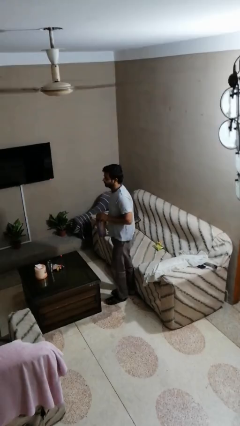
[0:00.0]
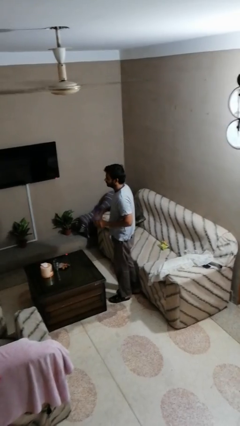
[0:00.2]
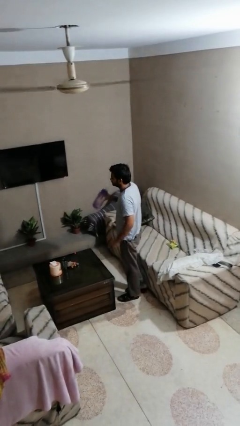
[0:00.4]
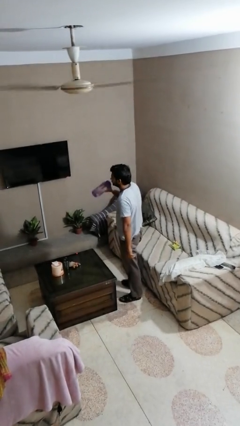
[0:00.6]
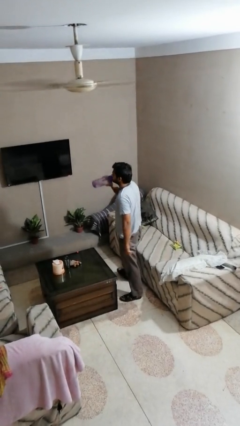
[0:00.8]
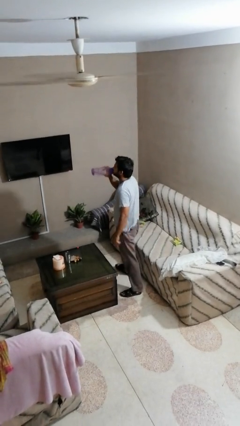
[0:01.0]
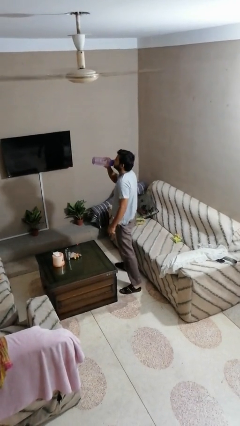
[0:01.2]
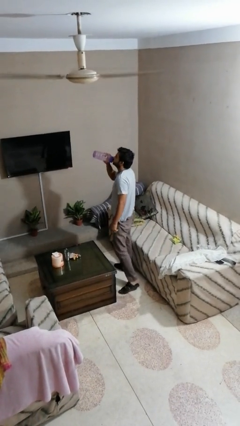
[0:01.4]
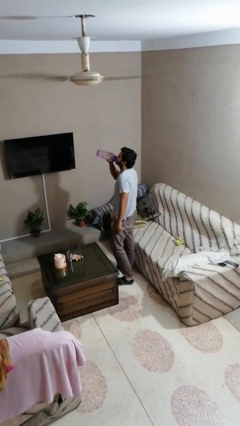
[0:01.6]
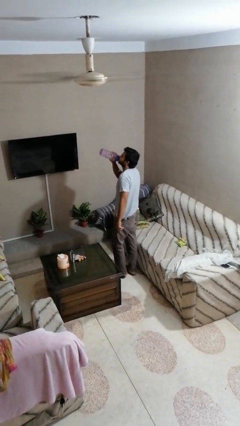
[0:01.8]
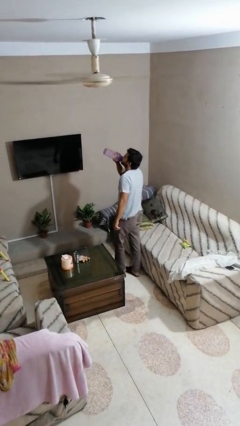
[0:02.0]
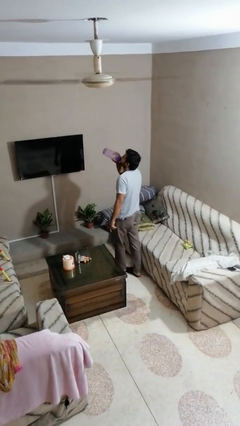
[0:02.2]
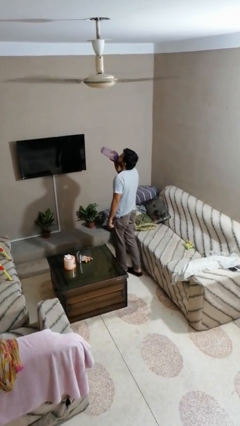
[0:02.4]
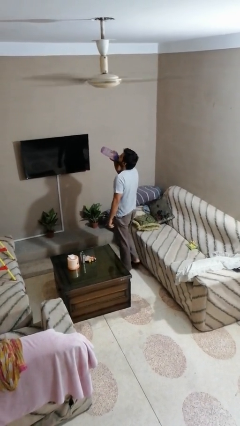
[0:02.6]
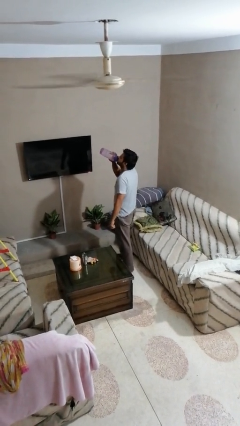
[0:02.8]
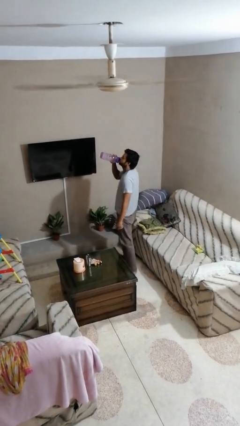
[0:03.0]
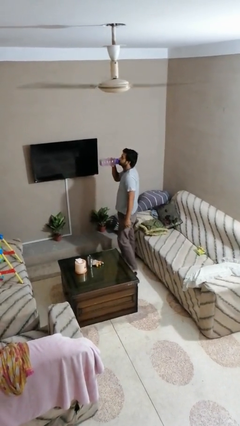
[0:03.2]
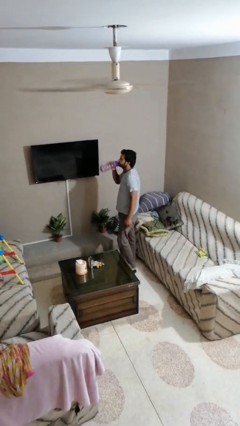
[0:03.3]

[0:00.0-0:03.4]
person drinks from bottle

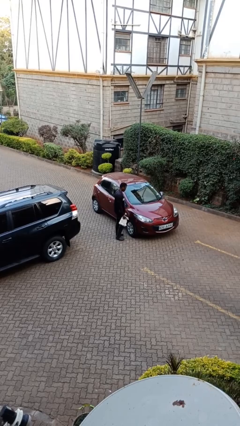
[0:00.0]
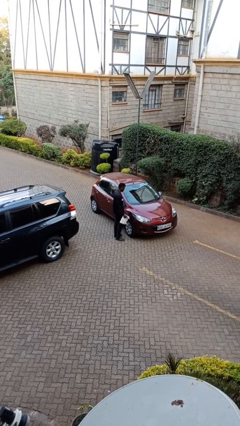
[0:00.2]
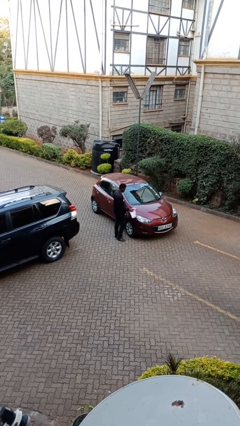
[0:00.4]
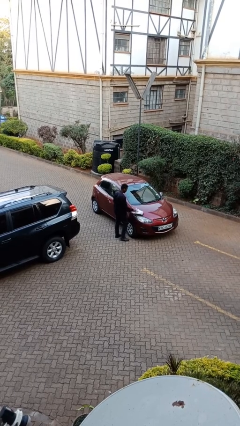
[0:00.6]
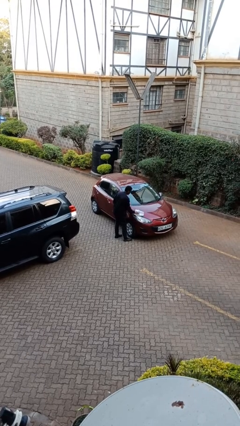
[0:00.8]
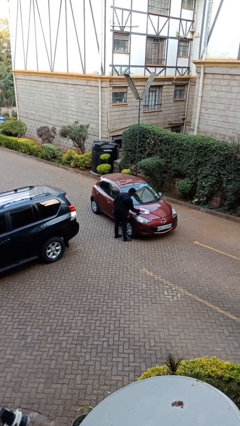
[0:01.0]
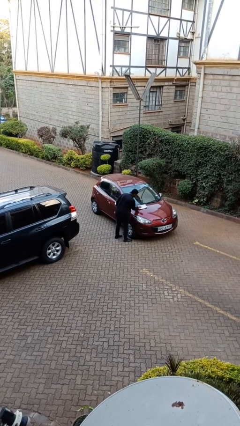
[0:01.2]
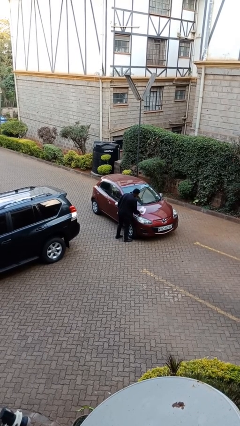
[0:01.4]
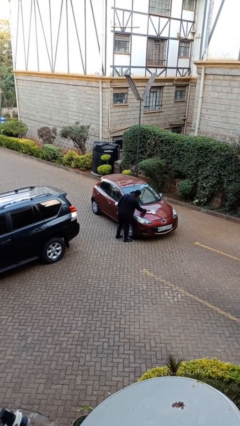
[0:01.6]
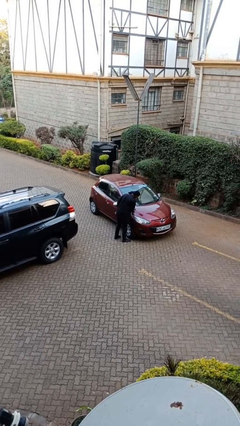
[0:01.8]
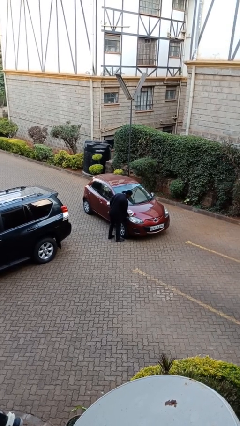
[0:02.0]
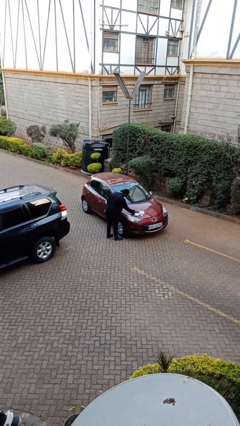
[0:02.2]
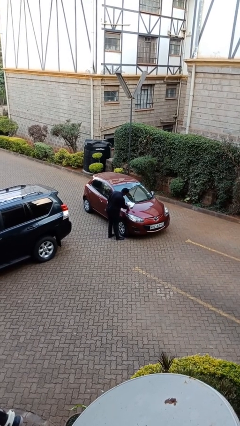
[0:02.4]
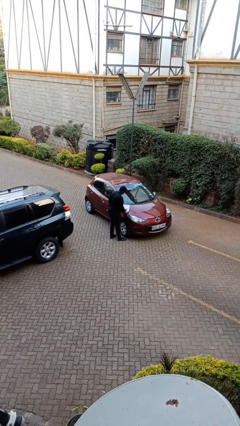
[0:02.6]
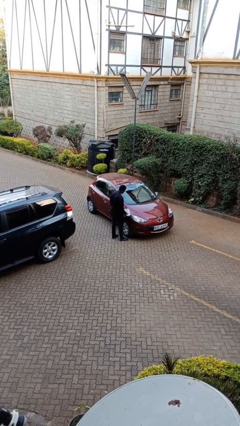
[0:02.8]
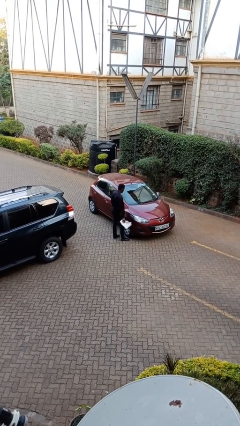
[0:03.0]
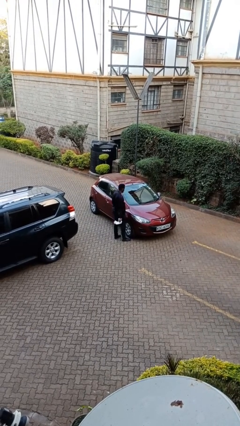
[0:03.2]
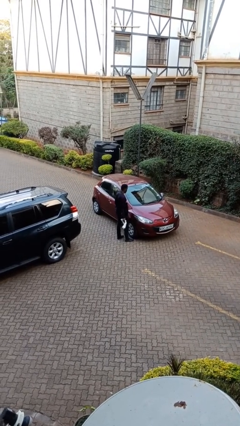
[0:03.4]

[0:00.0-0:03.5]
person polishes car with rag

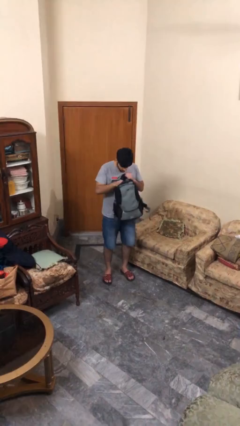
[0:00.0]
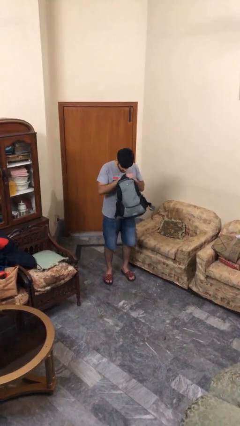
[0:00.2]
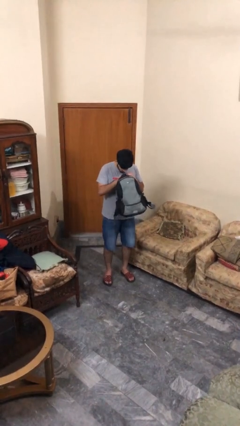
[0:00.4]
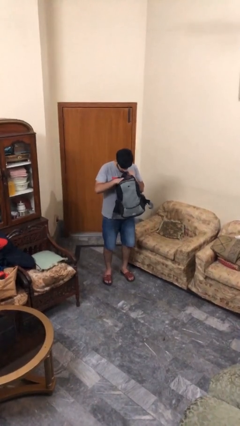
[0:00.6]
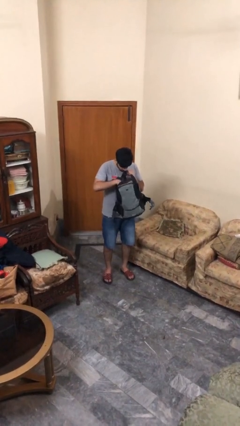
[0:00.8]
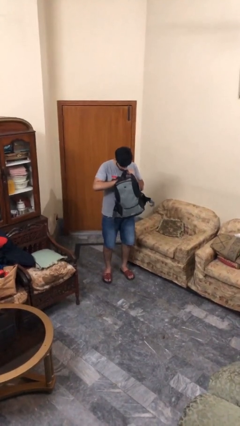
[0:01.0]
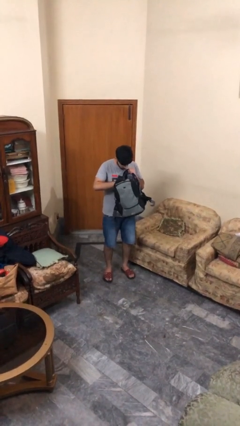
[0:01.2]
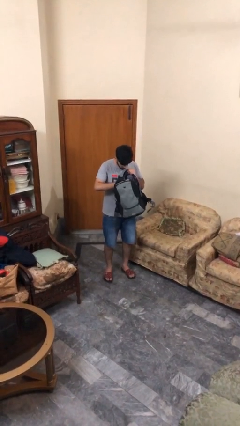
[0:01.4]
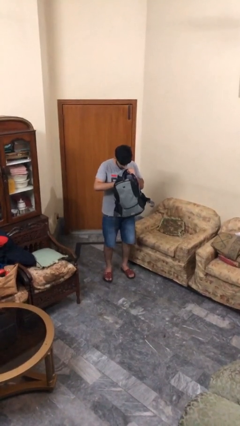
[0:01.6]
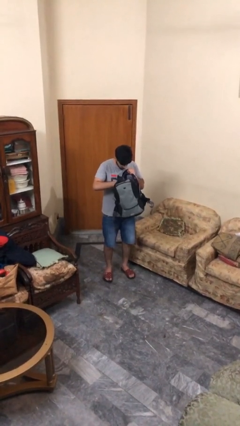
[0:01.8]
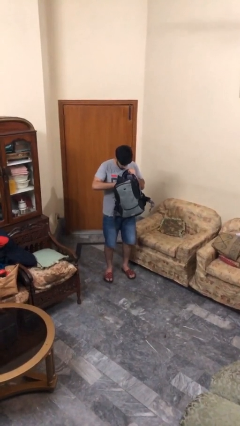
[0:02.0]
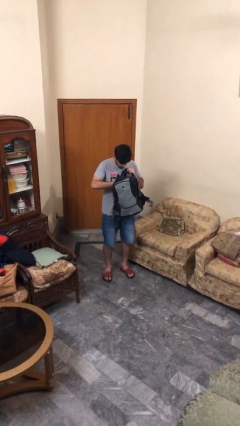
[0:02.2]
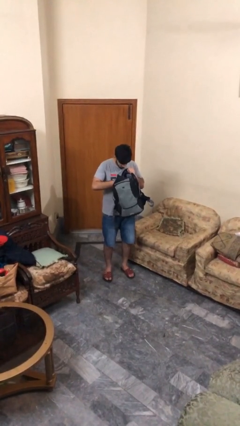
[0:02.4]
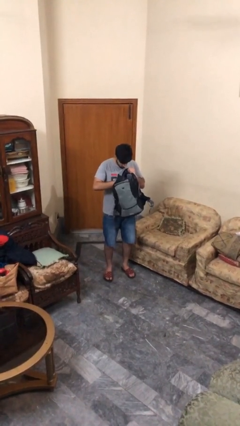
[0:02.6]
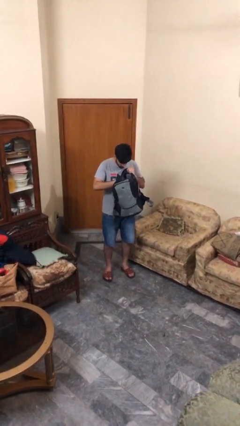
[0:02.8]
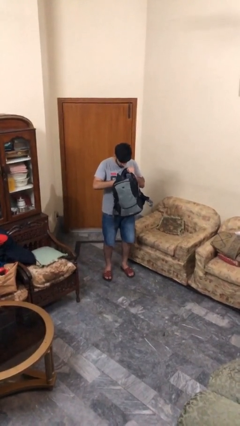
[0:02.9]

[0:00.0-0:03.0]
person searches in backpack

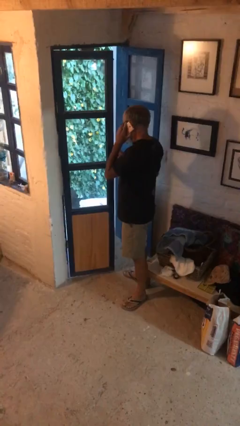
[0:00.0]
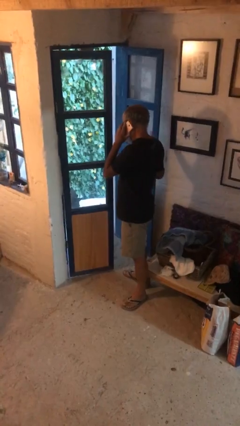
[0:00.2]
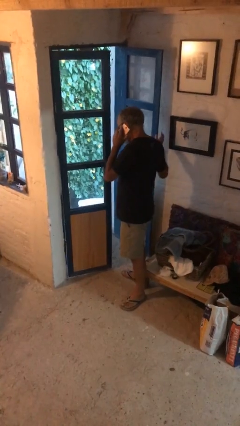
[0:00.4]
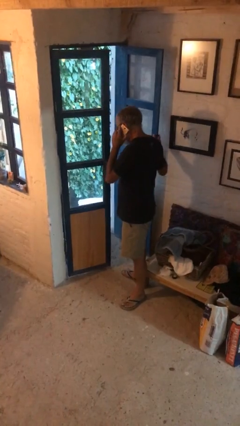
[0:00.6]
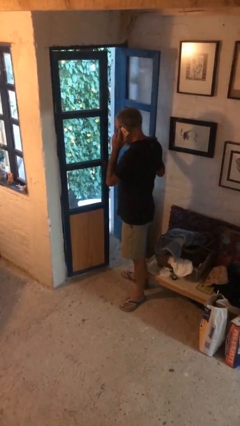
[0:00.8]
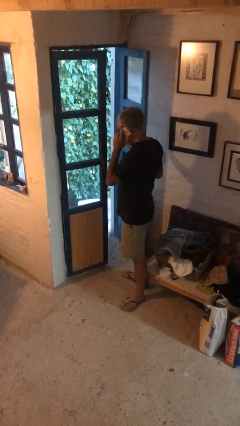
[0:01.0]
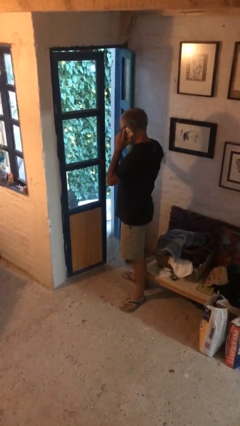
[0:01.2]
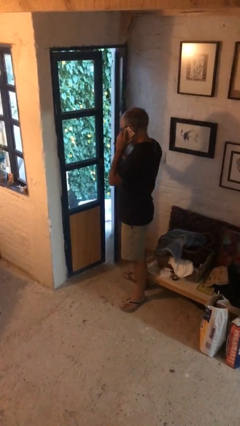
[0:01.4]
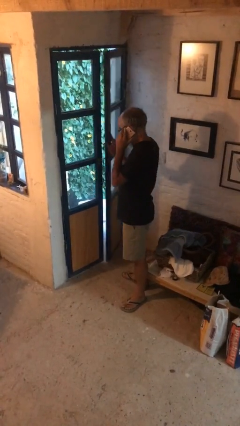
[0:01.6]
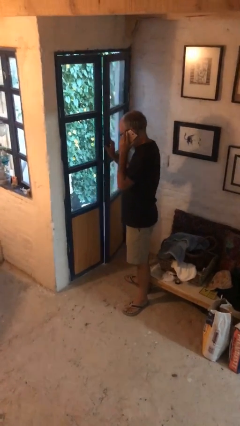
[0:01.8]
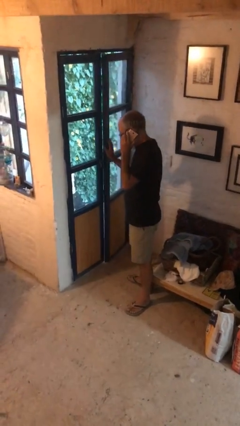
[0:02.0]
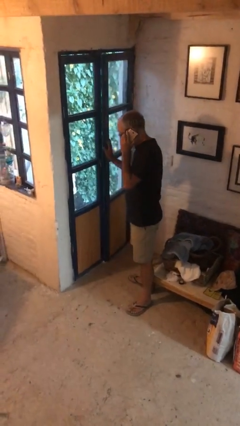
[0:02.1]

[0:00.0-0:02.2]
person closes facility door

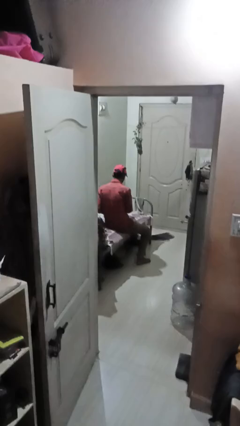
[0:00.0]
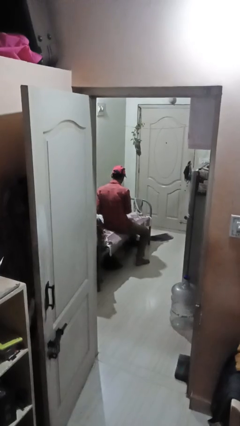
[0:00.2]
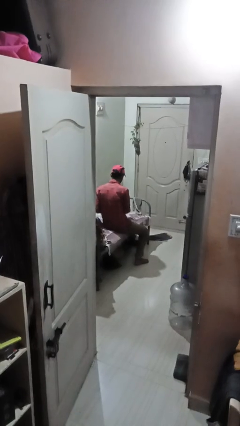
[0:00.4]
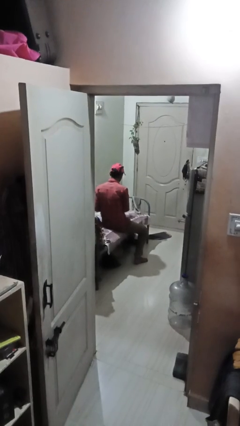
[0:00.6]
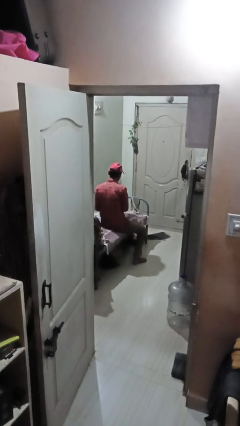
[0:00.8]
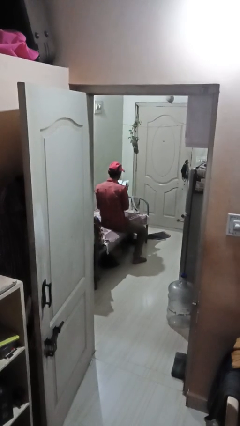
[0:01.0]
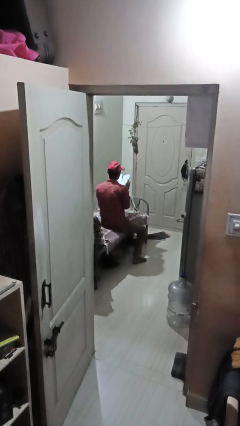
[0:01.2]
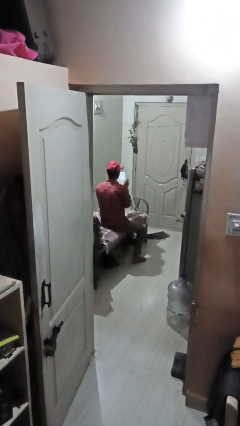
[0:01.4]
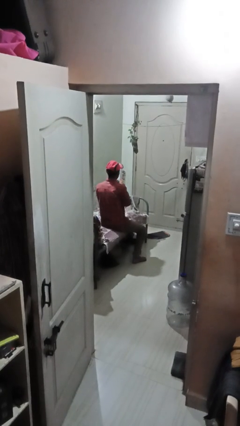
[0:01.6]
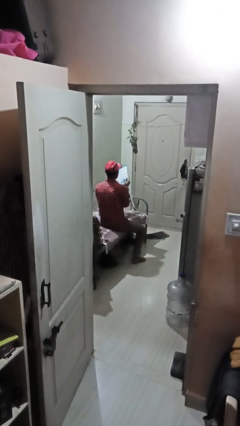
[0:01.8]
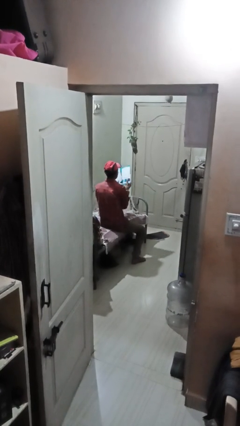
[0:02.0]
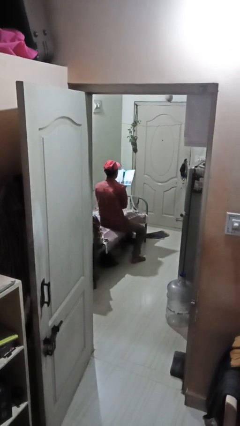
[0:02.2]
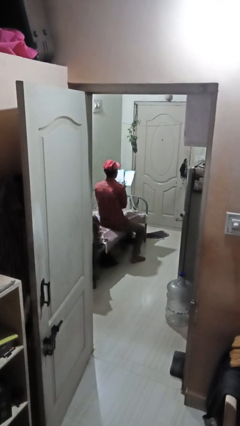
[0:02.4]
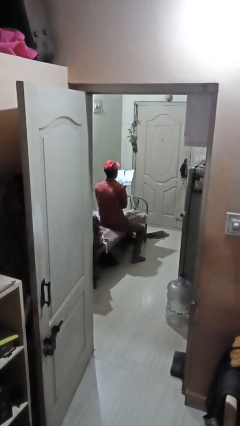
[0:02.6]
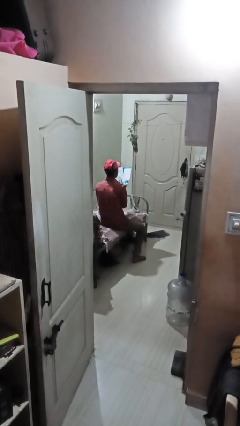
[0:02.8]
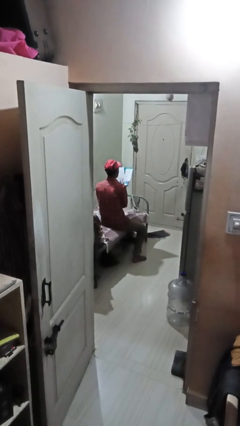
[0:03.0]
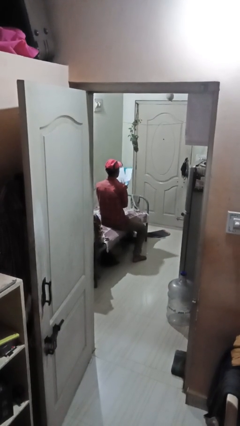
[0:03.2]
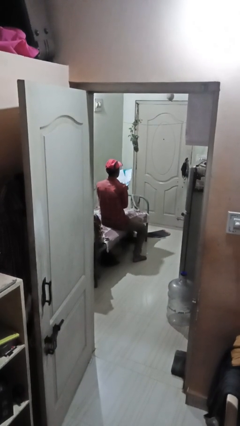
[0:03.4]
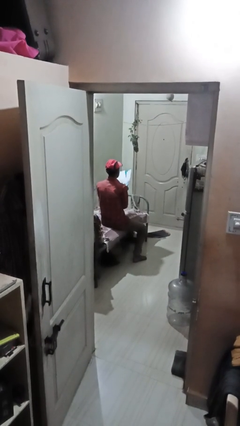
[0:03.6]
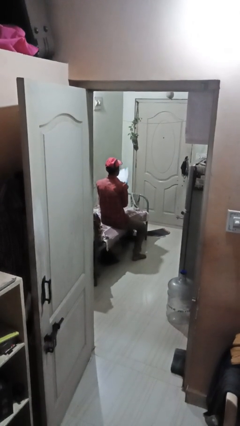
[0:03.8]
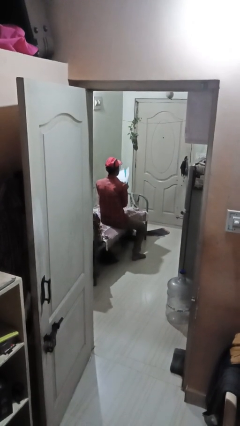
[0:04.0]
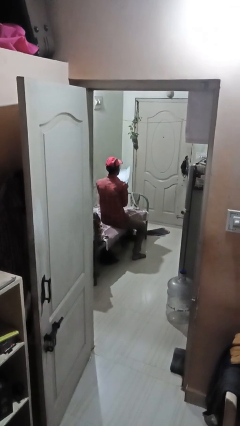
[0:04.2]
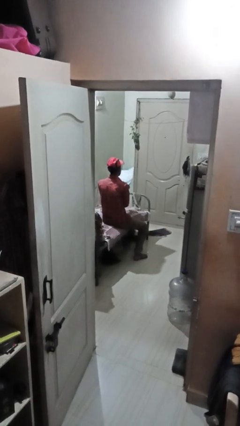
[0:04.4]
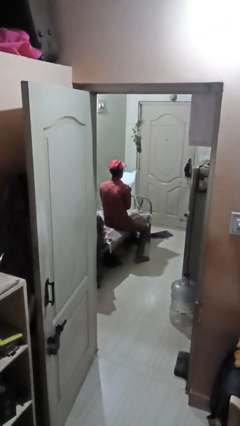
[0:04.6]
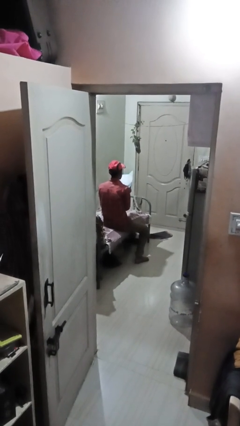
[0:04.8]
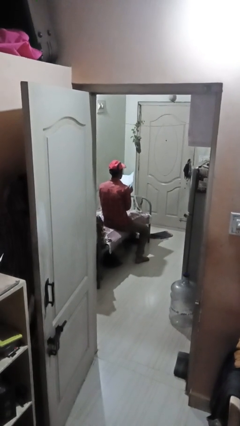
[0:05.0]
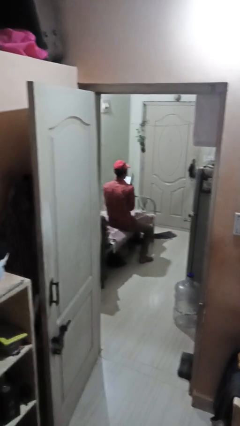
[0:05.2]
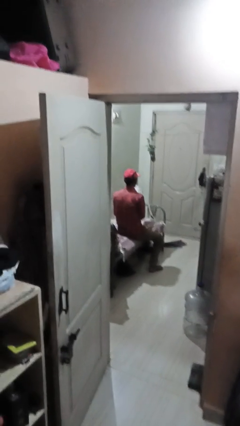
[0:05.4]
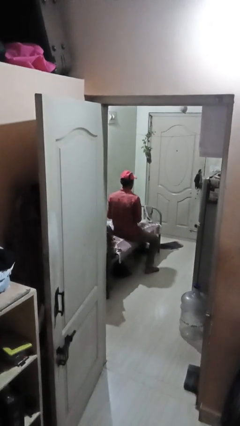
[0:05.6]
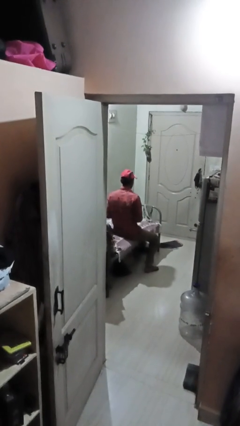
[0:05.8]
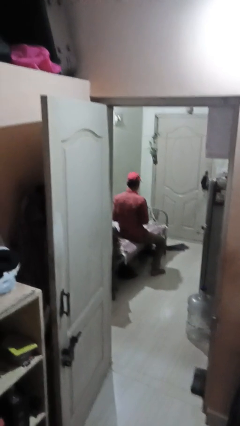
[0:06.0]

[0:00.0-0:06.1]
person reads magazine
